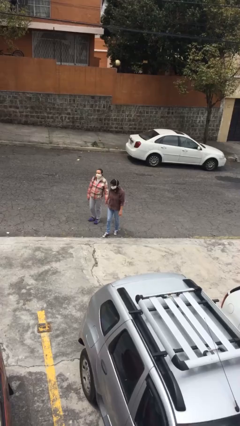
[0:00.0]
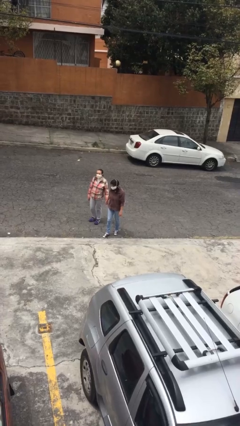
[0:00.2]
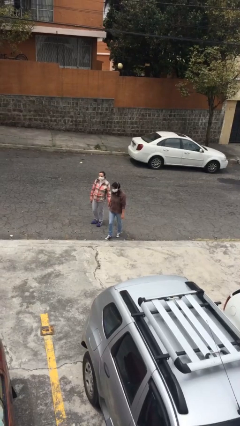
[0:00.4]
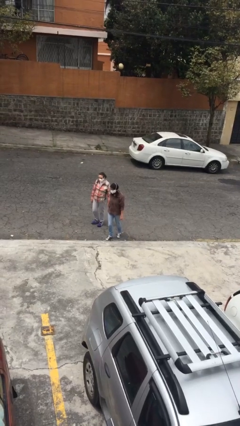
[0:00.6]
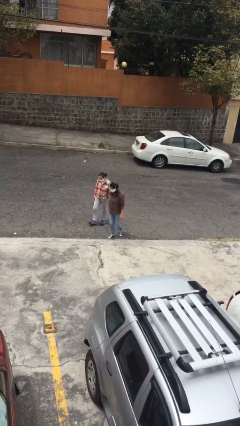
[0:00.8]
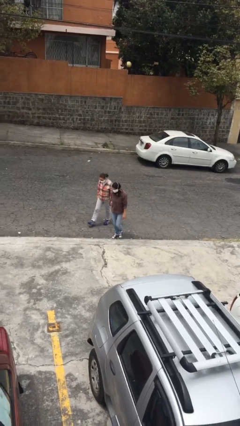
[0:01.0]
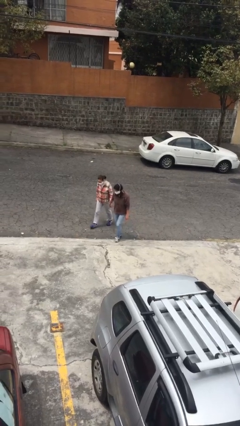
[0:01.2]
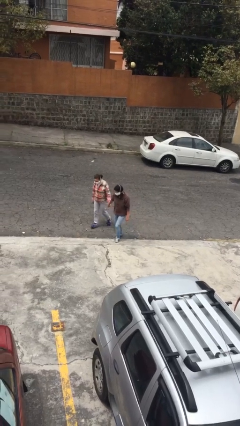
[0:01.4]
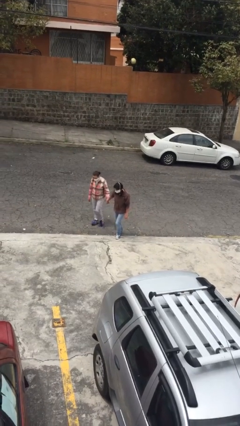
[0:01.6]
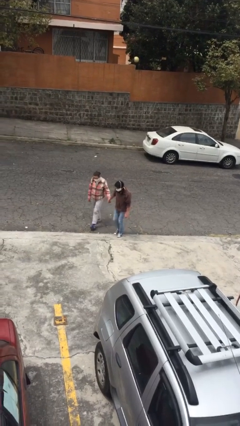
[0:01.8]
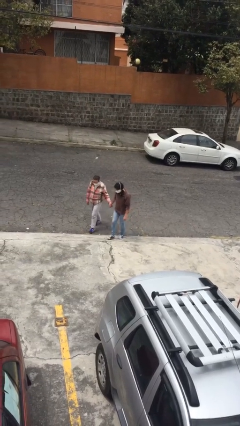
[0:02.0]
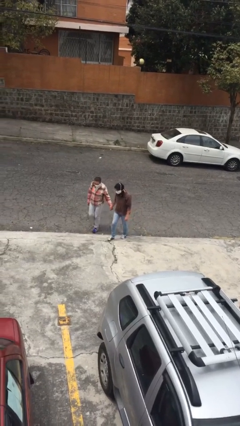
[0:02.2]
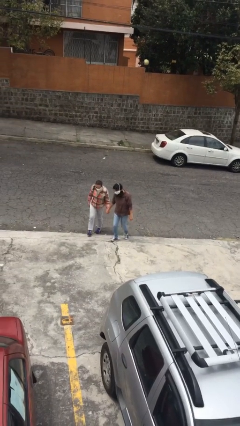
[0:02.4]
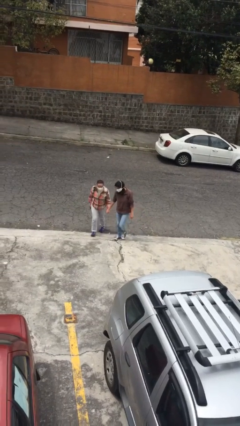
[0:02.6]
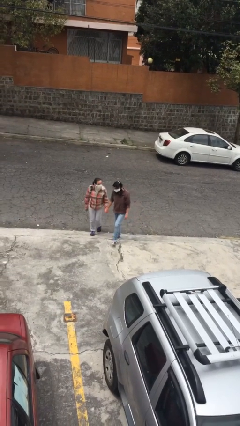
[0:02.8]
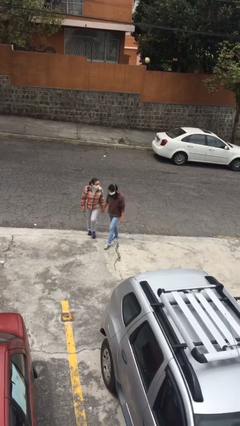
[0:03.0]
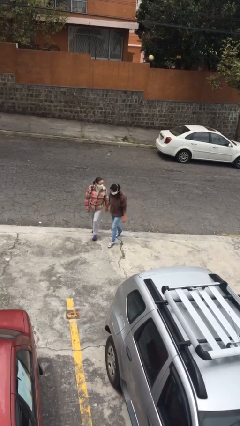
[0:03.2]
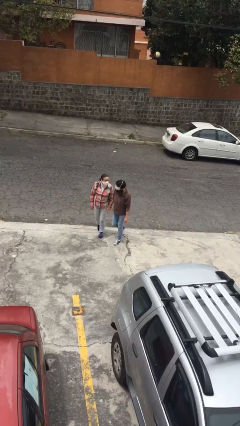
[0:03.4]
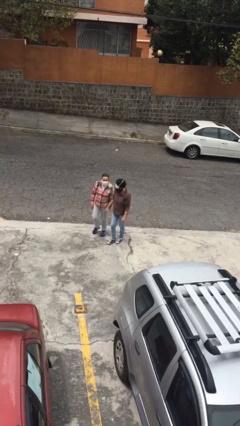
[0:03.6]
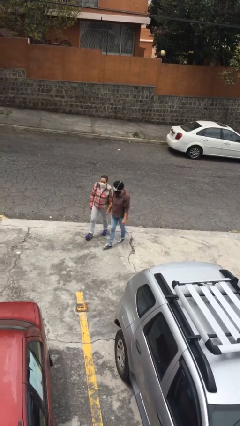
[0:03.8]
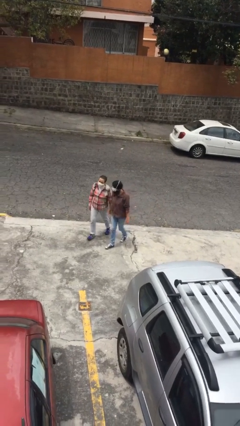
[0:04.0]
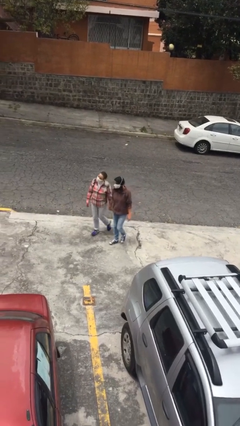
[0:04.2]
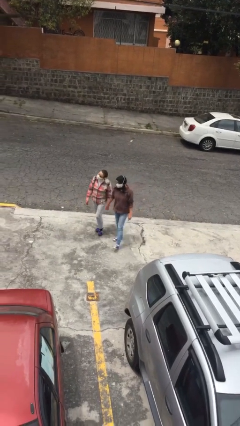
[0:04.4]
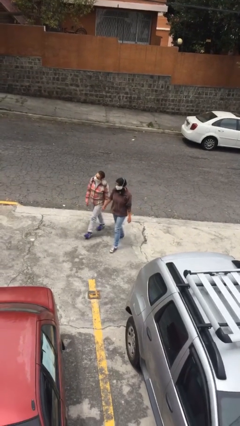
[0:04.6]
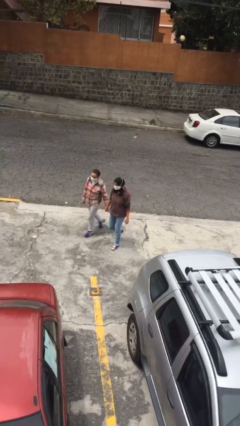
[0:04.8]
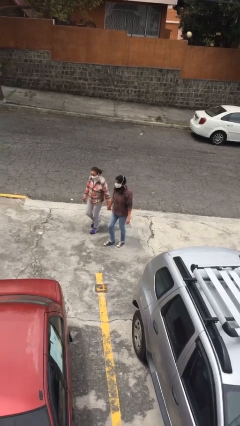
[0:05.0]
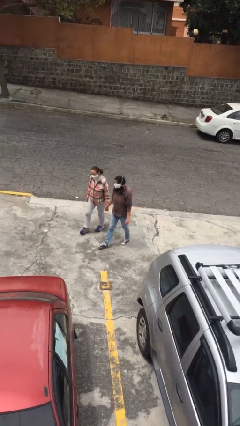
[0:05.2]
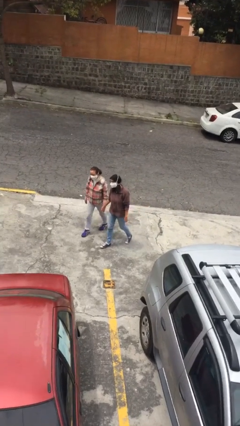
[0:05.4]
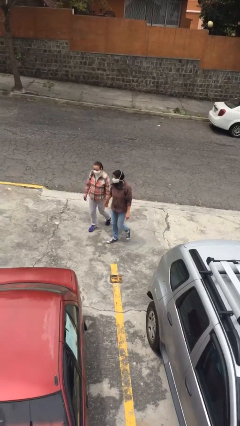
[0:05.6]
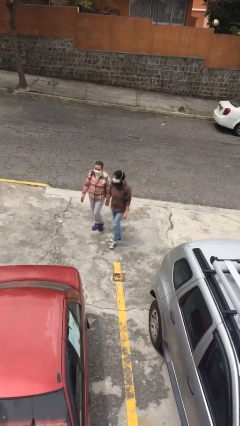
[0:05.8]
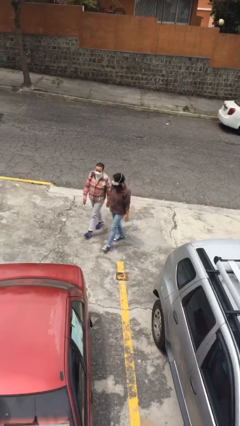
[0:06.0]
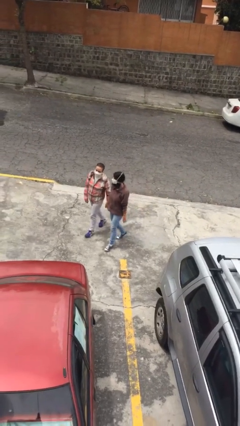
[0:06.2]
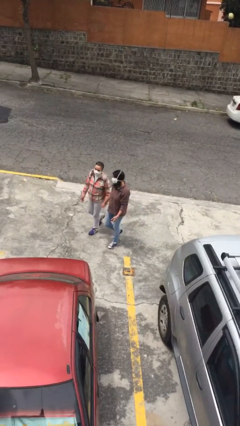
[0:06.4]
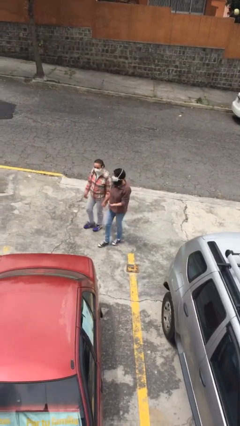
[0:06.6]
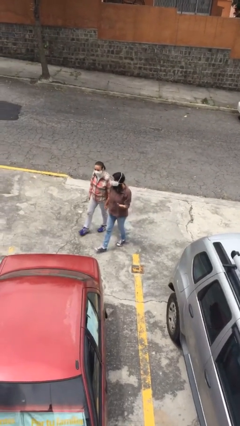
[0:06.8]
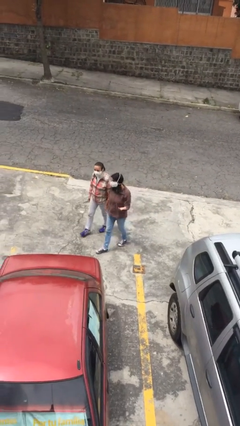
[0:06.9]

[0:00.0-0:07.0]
person holds hand

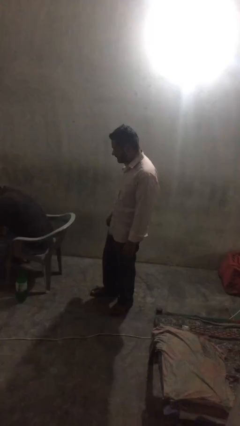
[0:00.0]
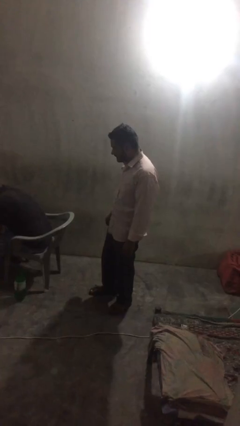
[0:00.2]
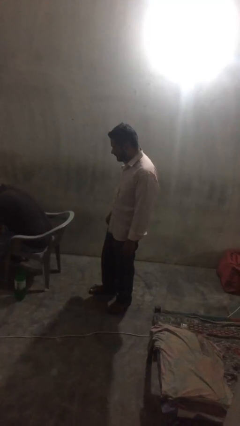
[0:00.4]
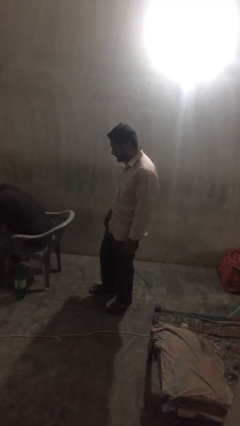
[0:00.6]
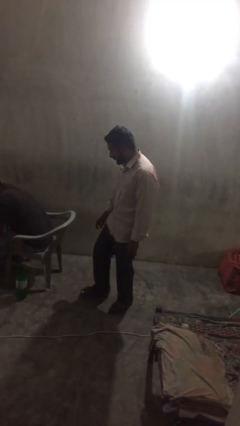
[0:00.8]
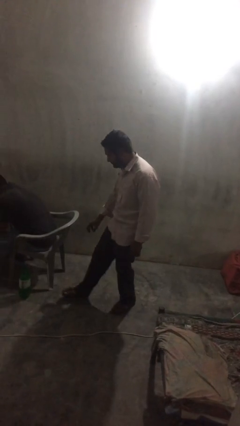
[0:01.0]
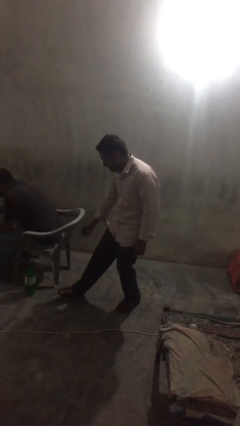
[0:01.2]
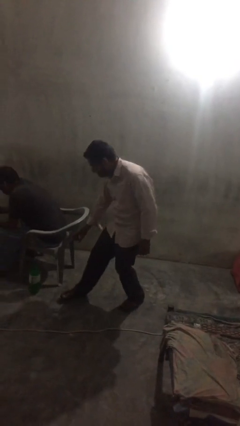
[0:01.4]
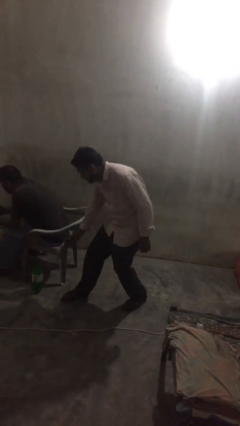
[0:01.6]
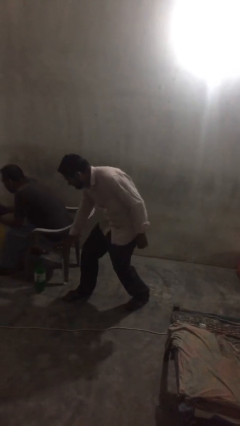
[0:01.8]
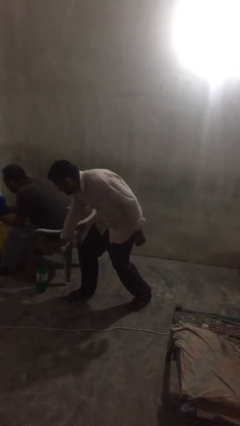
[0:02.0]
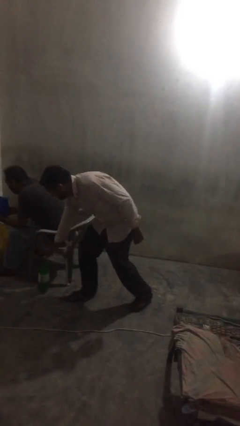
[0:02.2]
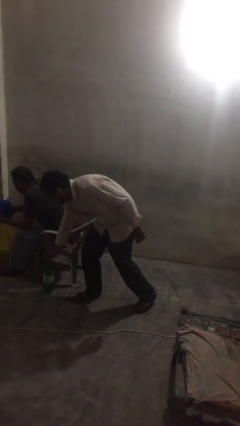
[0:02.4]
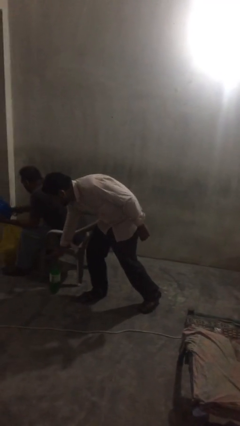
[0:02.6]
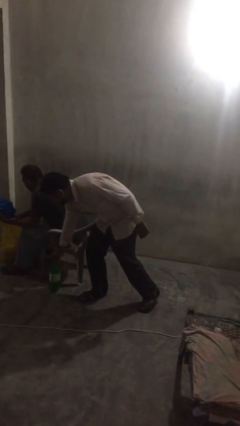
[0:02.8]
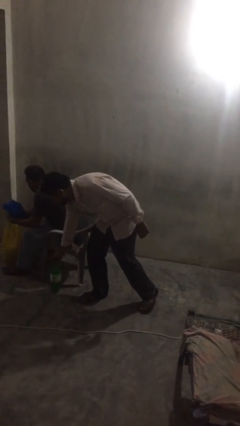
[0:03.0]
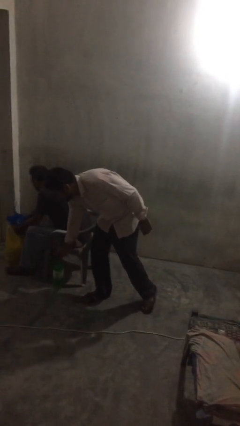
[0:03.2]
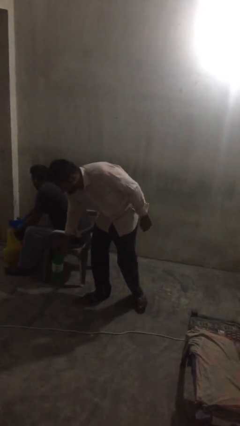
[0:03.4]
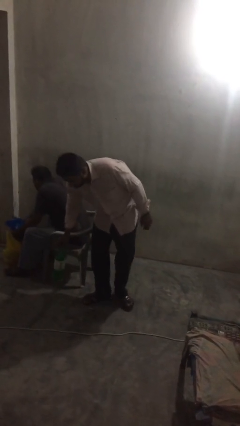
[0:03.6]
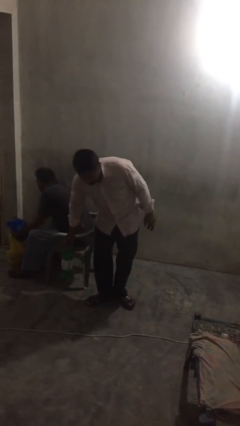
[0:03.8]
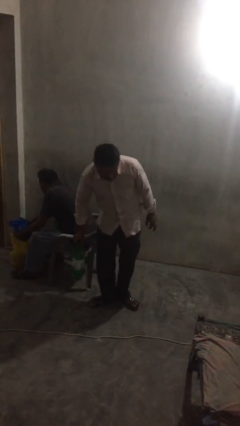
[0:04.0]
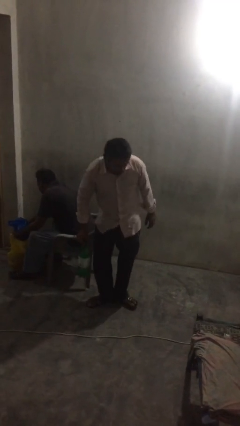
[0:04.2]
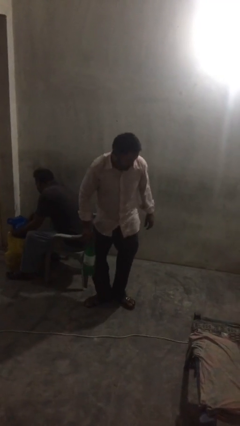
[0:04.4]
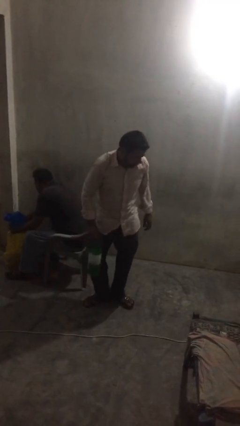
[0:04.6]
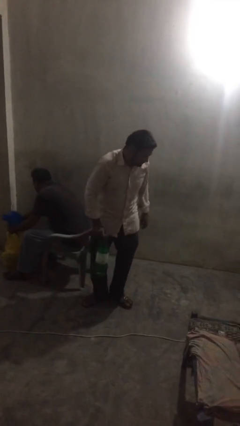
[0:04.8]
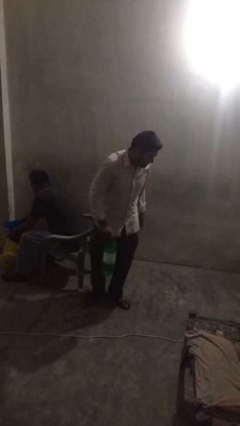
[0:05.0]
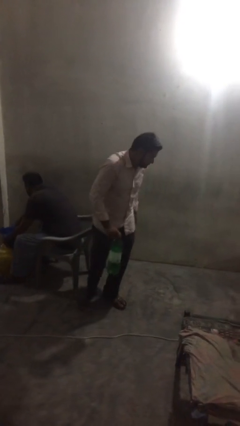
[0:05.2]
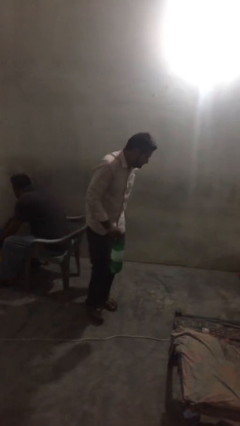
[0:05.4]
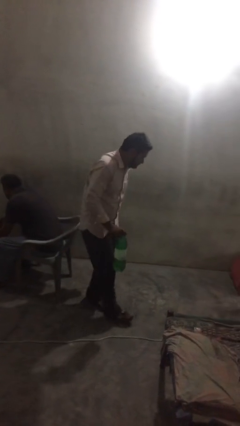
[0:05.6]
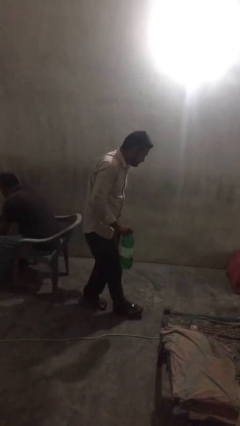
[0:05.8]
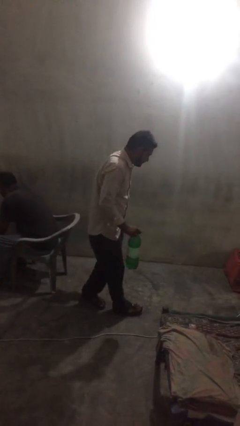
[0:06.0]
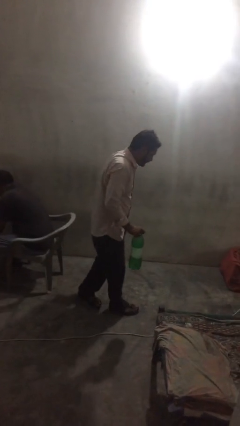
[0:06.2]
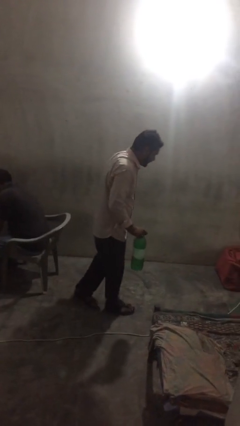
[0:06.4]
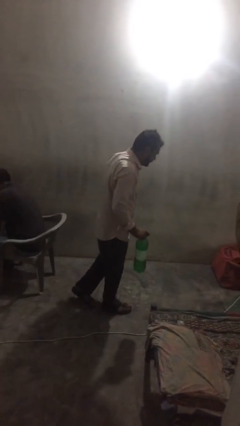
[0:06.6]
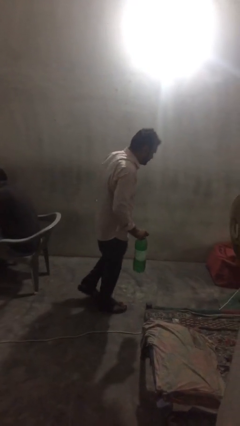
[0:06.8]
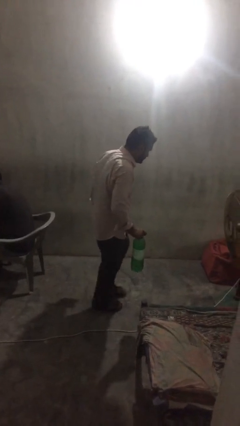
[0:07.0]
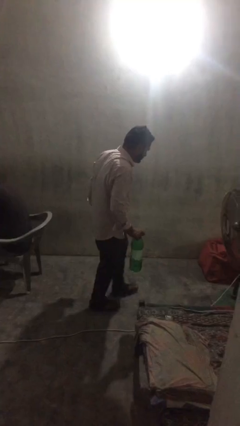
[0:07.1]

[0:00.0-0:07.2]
person steals object from person

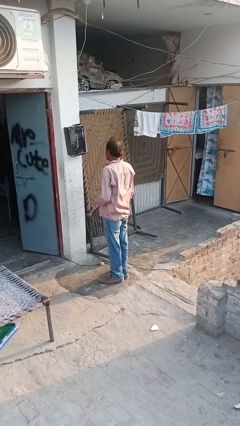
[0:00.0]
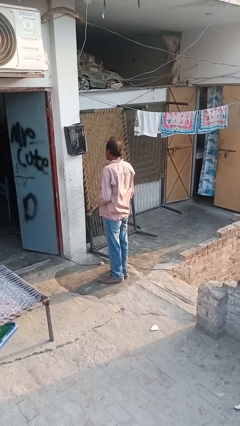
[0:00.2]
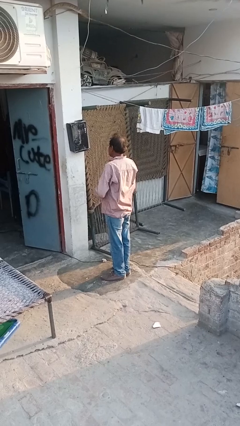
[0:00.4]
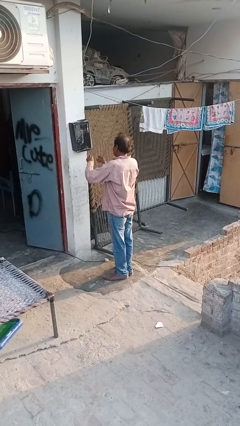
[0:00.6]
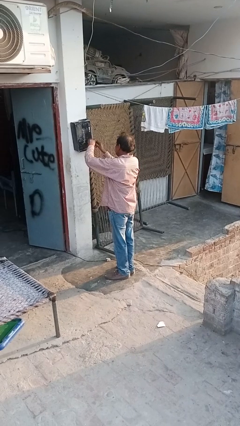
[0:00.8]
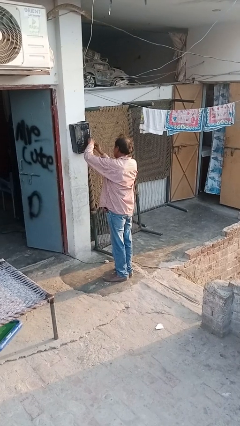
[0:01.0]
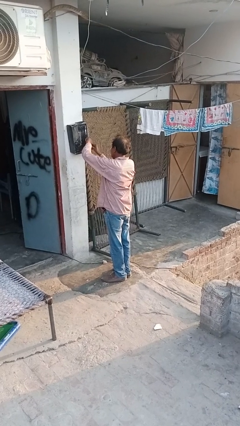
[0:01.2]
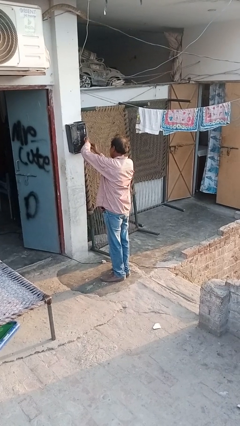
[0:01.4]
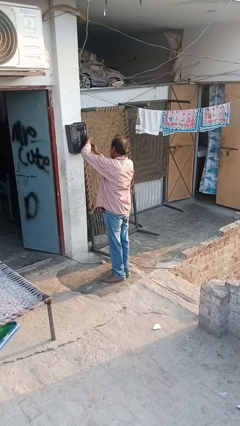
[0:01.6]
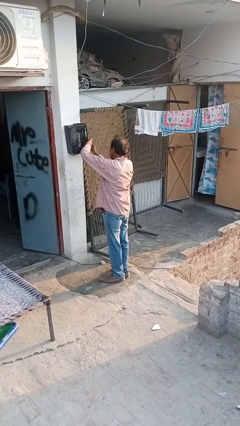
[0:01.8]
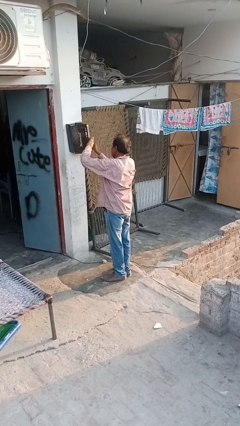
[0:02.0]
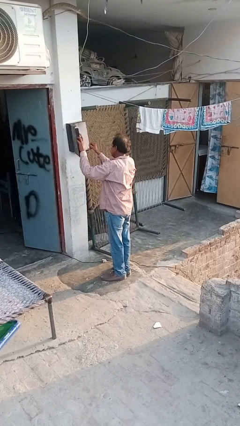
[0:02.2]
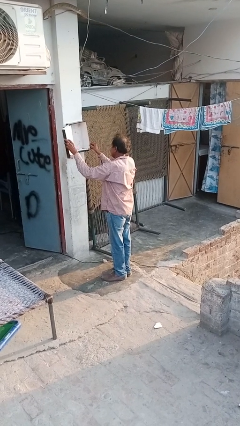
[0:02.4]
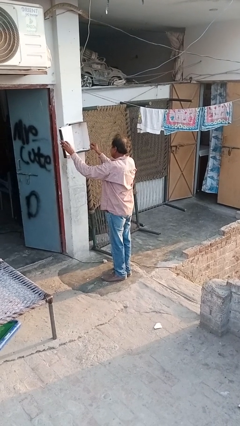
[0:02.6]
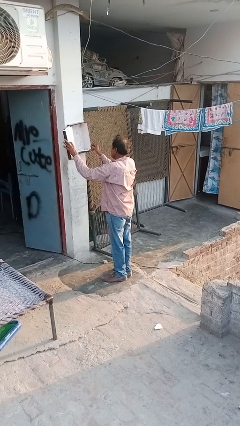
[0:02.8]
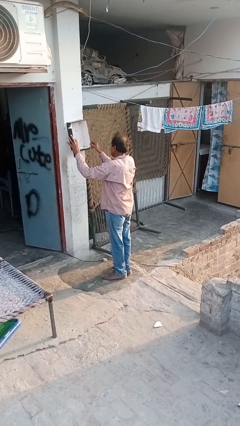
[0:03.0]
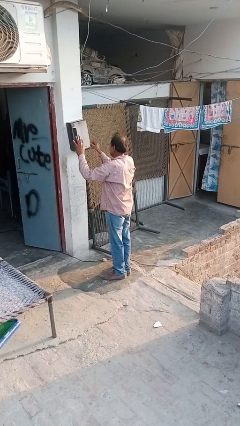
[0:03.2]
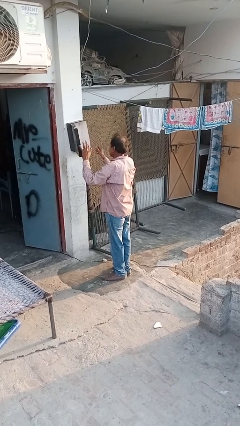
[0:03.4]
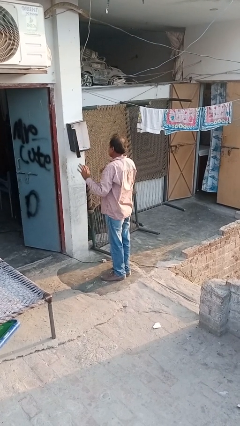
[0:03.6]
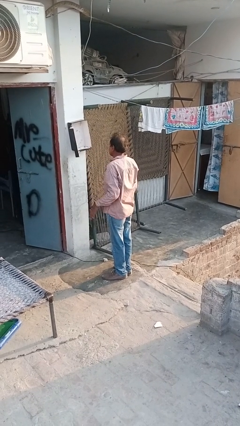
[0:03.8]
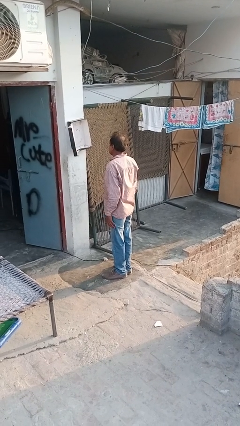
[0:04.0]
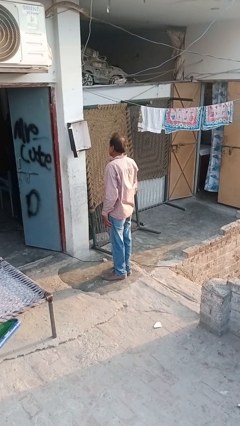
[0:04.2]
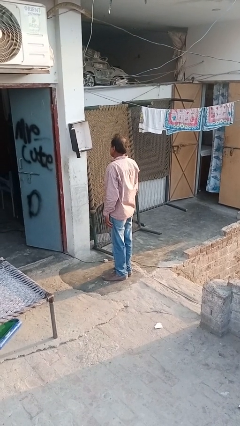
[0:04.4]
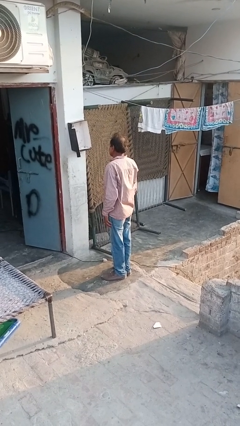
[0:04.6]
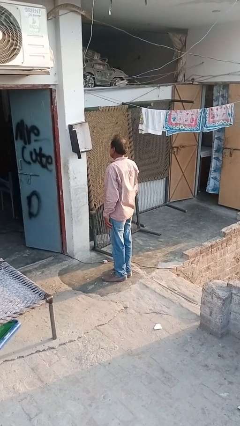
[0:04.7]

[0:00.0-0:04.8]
person opens mailbox
